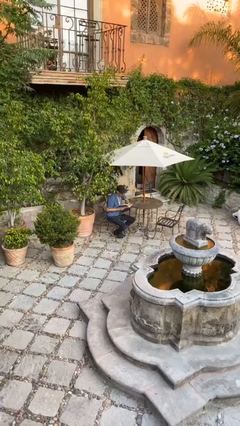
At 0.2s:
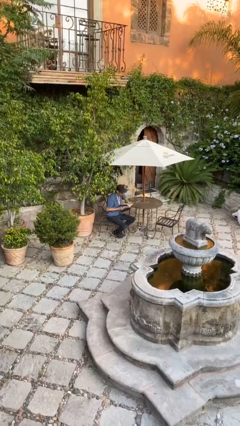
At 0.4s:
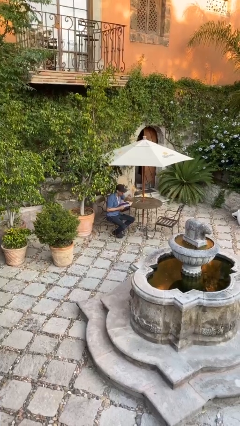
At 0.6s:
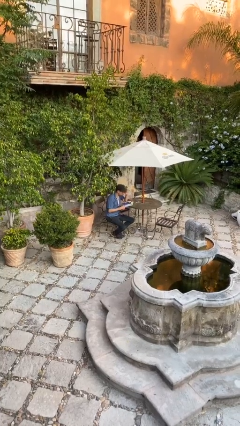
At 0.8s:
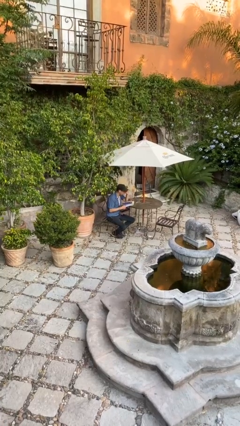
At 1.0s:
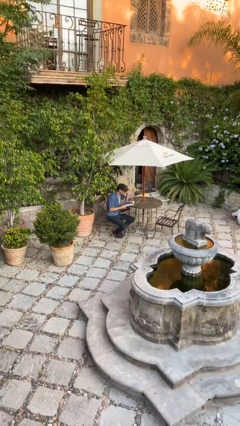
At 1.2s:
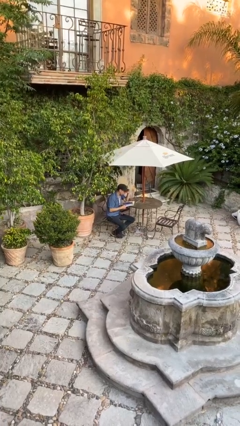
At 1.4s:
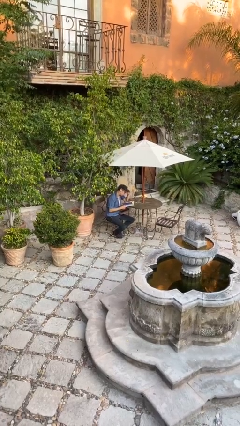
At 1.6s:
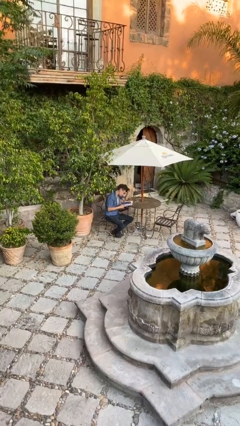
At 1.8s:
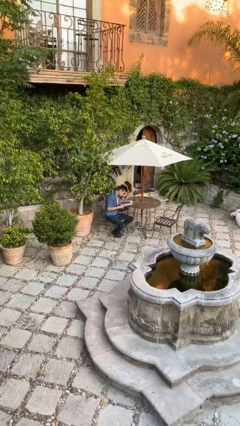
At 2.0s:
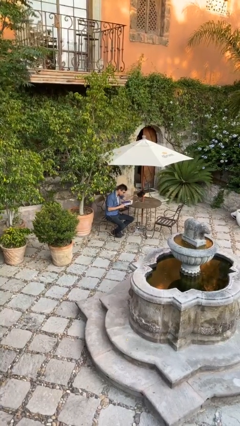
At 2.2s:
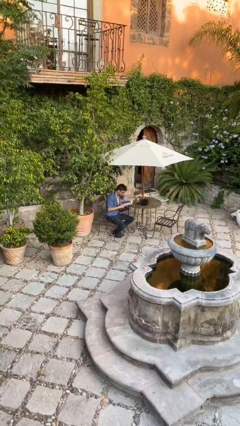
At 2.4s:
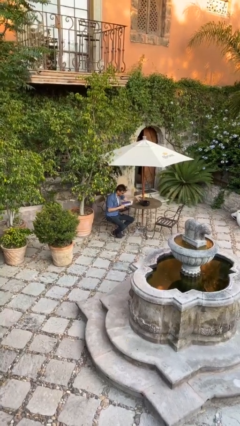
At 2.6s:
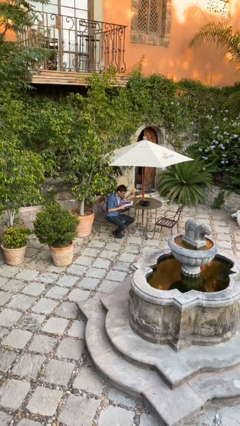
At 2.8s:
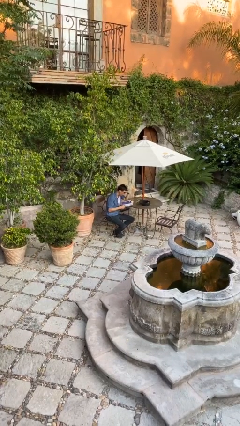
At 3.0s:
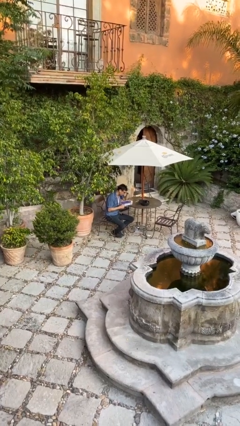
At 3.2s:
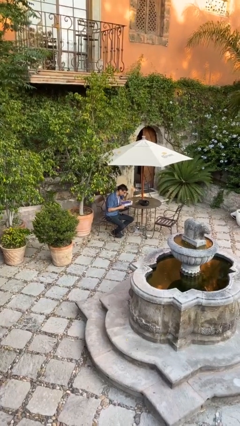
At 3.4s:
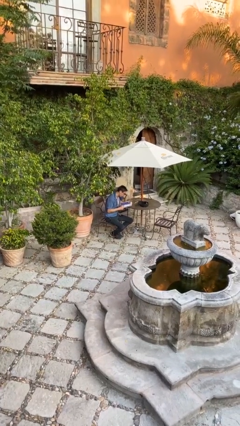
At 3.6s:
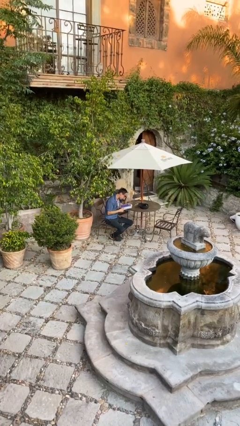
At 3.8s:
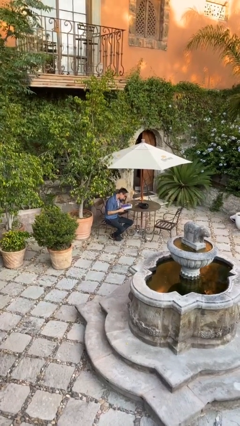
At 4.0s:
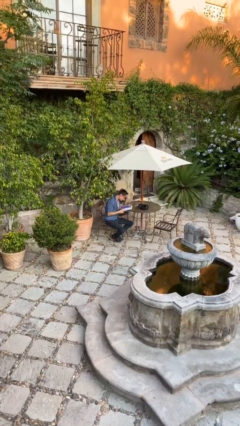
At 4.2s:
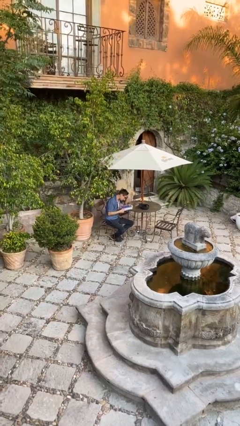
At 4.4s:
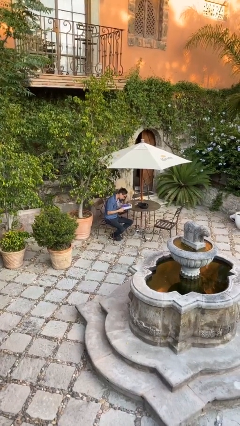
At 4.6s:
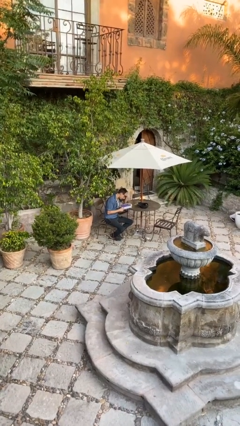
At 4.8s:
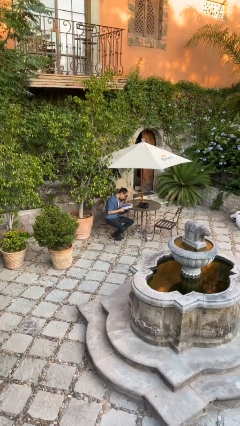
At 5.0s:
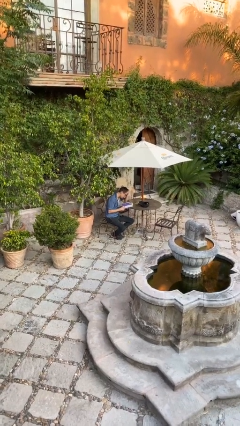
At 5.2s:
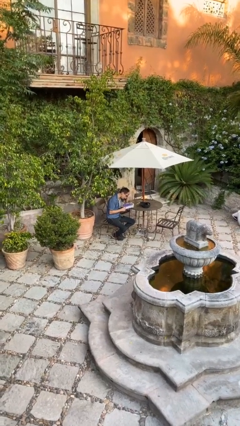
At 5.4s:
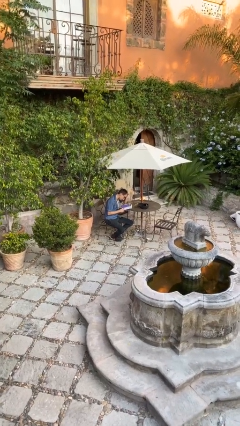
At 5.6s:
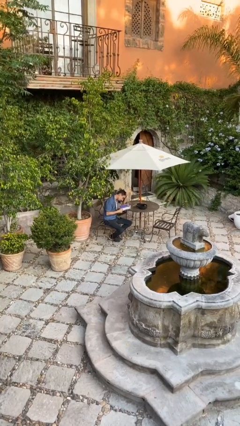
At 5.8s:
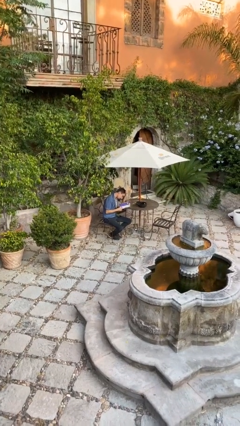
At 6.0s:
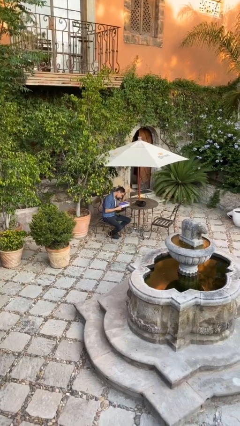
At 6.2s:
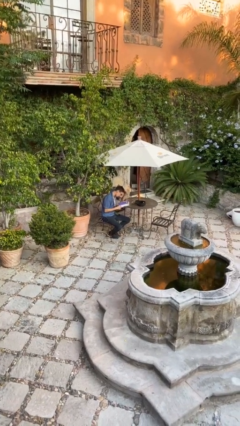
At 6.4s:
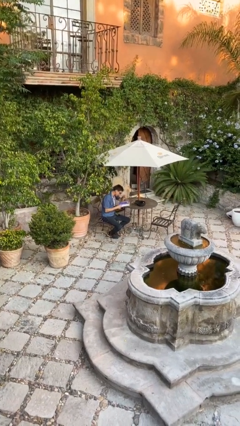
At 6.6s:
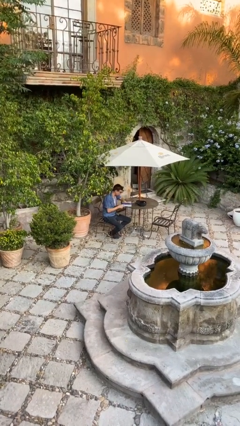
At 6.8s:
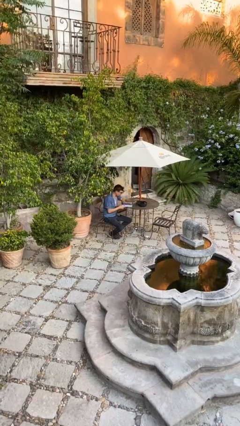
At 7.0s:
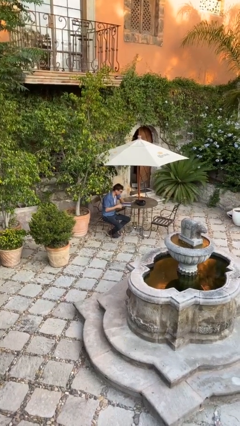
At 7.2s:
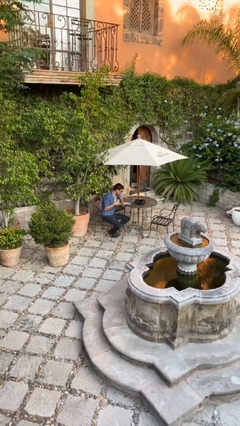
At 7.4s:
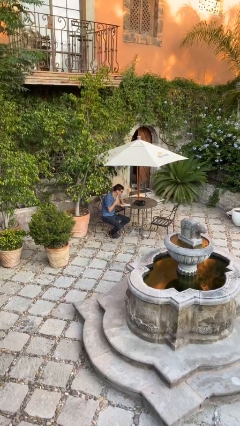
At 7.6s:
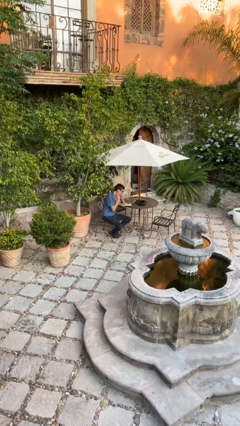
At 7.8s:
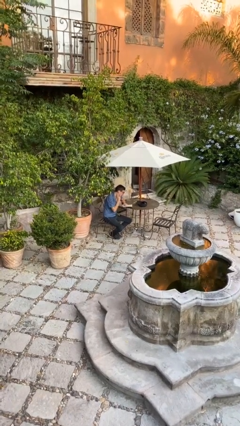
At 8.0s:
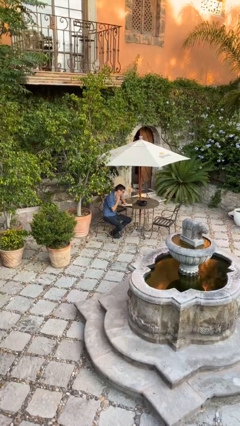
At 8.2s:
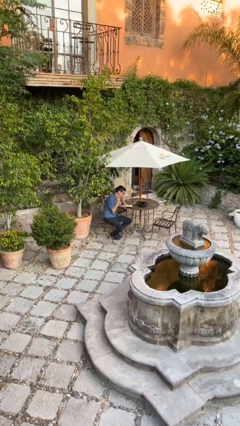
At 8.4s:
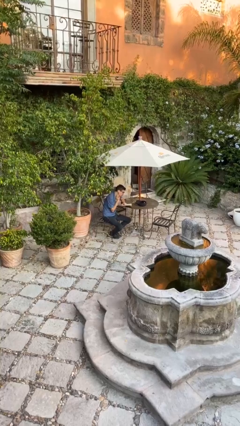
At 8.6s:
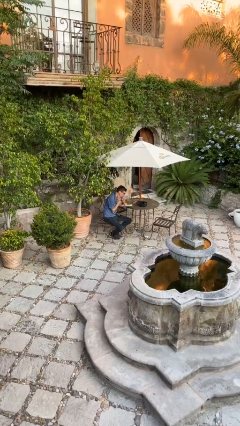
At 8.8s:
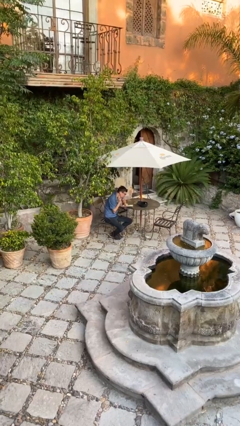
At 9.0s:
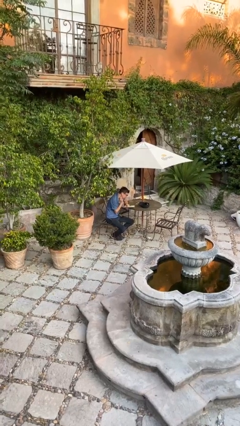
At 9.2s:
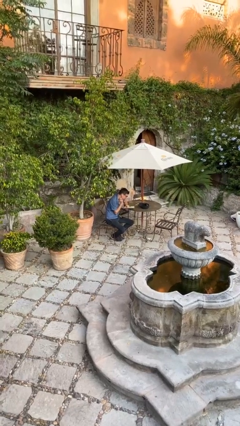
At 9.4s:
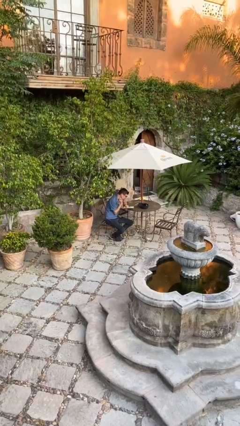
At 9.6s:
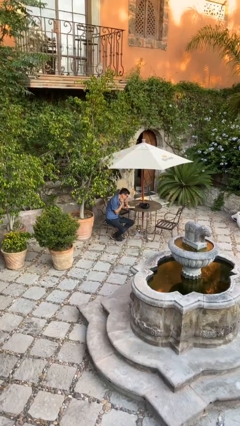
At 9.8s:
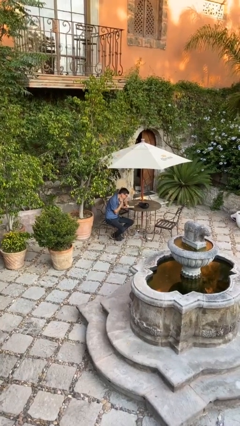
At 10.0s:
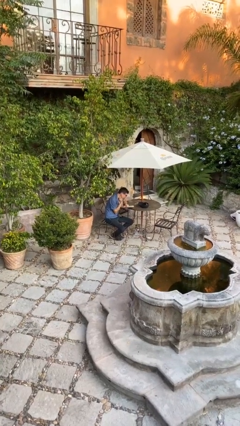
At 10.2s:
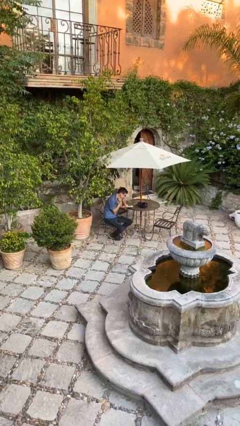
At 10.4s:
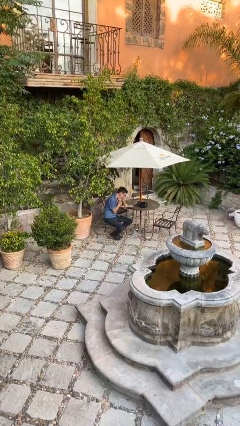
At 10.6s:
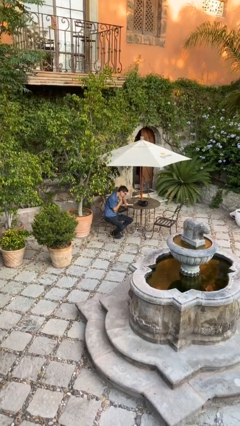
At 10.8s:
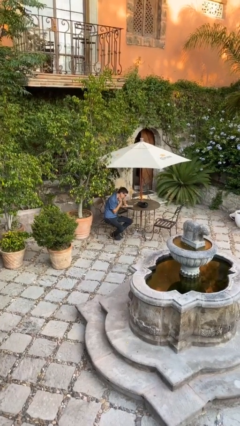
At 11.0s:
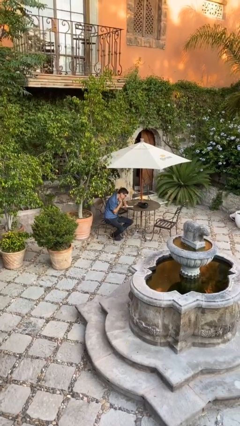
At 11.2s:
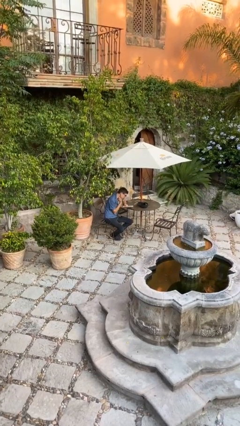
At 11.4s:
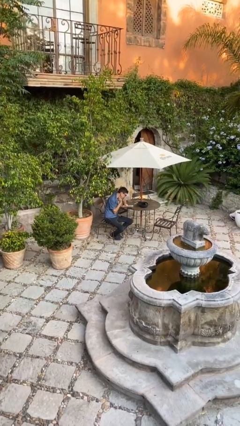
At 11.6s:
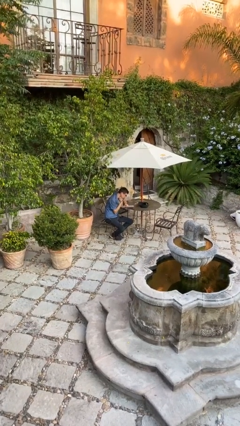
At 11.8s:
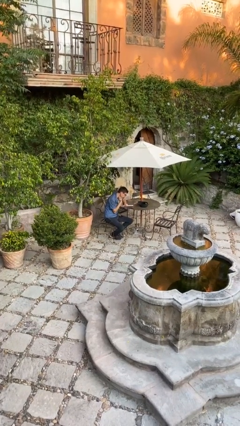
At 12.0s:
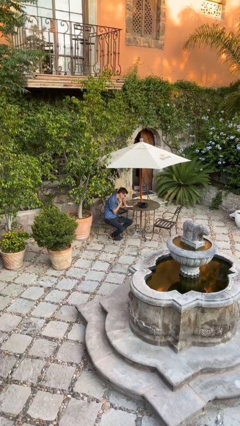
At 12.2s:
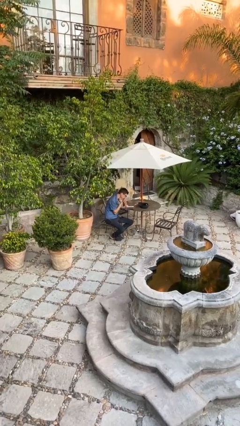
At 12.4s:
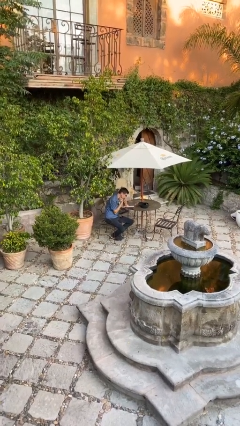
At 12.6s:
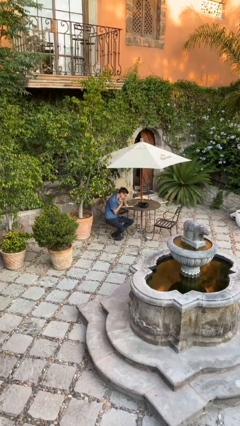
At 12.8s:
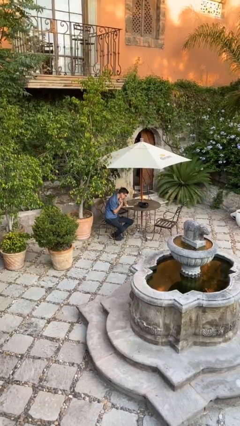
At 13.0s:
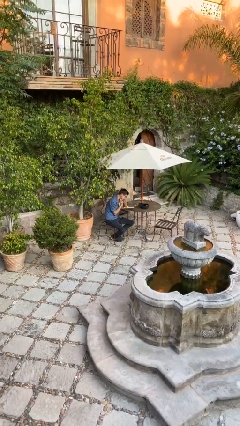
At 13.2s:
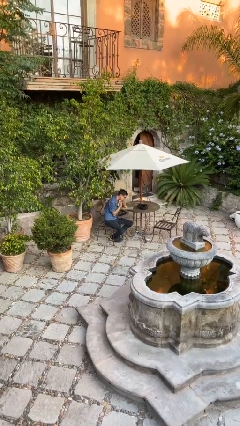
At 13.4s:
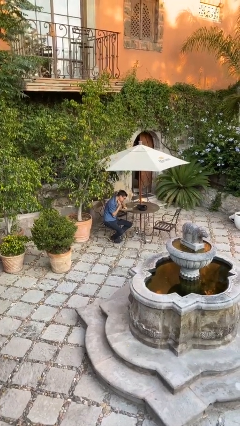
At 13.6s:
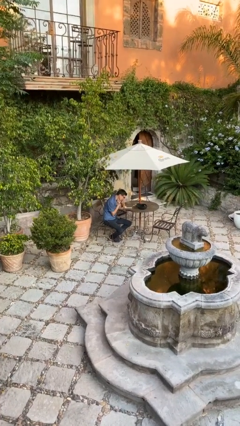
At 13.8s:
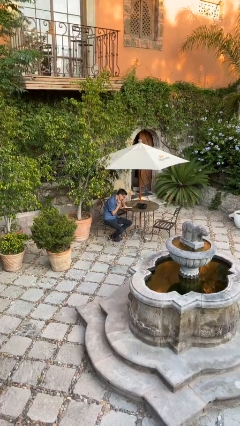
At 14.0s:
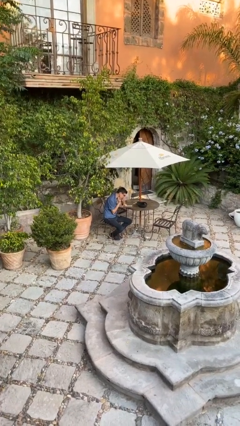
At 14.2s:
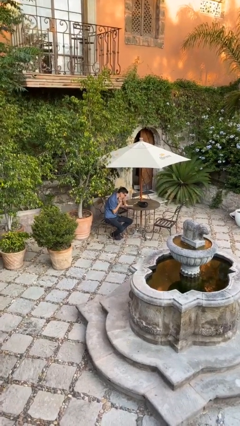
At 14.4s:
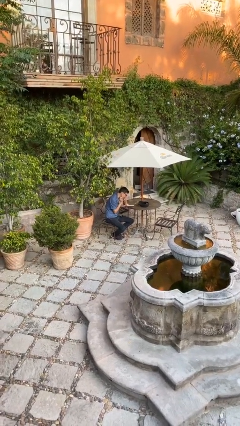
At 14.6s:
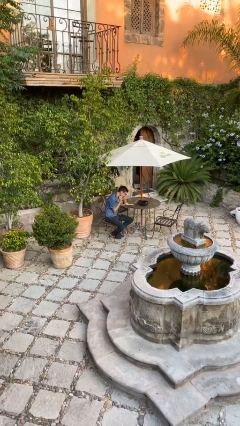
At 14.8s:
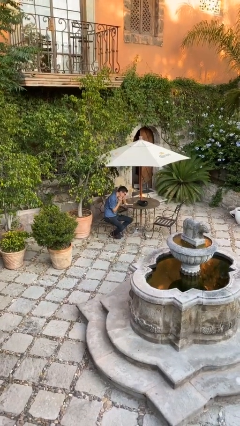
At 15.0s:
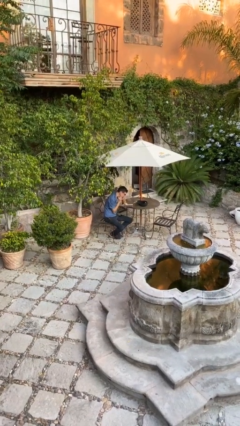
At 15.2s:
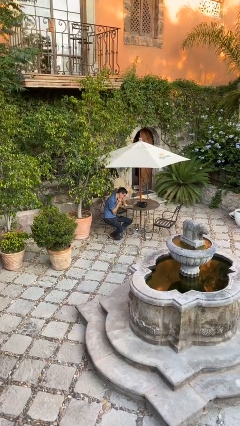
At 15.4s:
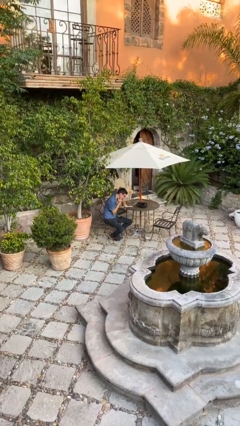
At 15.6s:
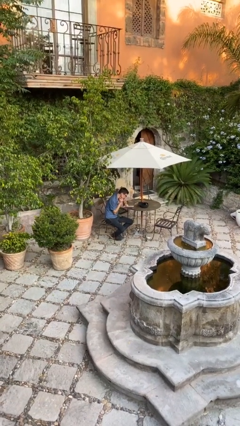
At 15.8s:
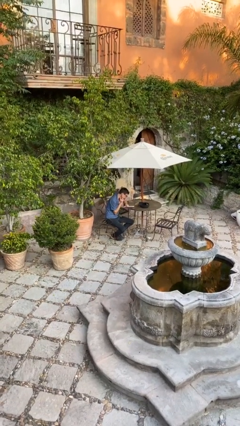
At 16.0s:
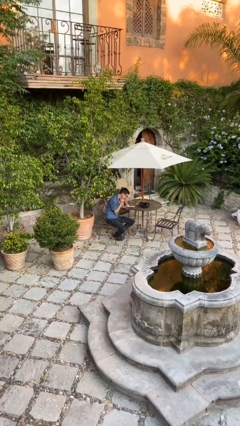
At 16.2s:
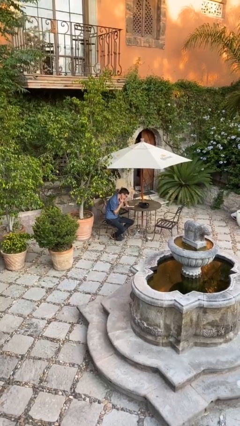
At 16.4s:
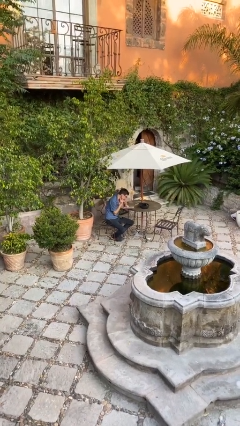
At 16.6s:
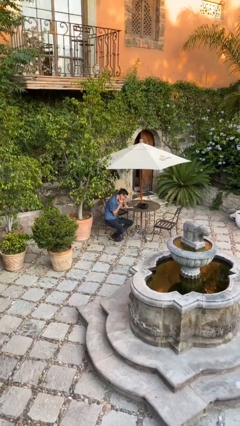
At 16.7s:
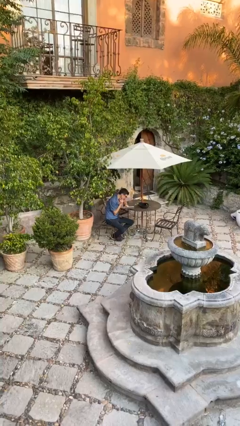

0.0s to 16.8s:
person reads document

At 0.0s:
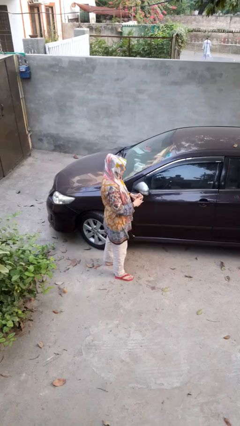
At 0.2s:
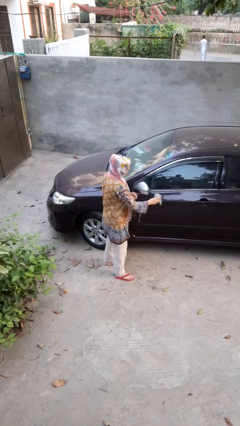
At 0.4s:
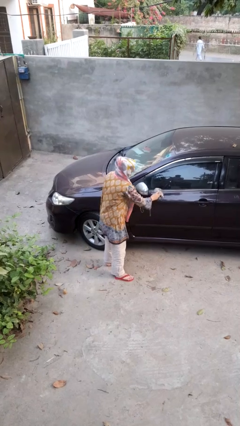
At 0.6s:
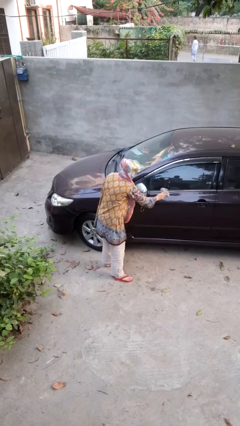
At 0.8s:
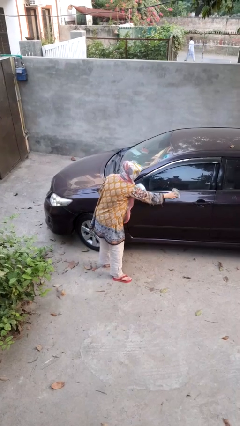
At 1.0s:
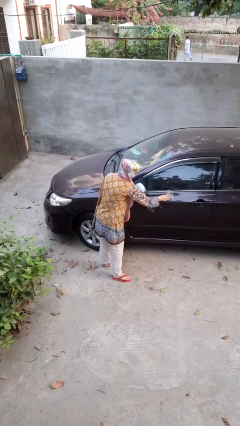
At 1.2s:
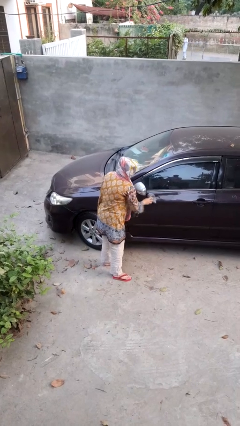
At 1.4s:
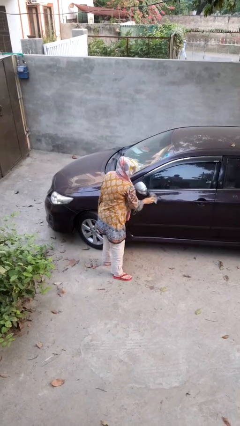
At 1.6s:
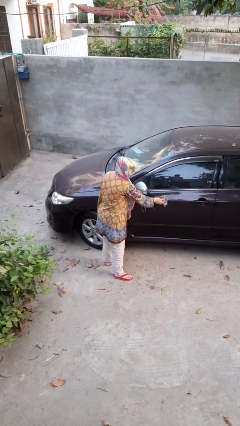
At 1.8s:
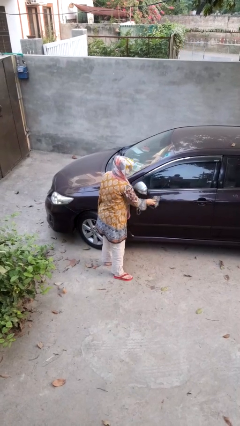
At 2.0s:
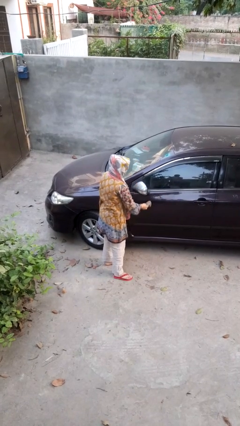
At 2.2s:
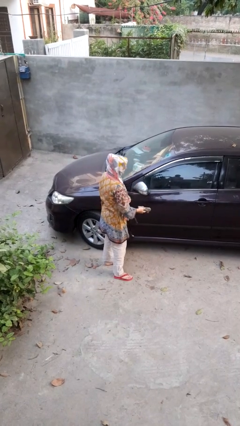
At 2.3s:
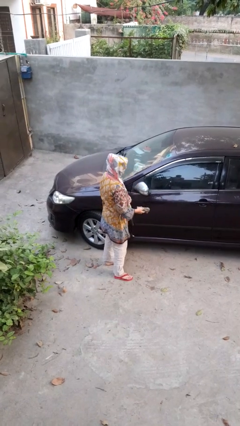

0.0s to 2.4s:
person polishes car with rag
